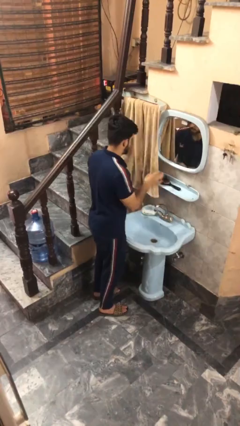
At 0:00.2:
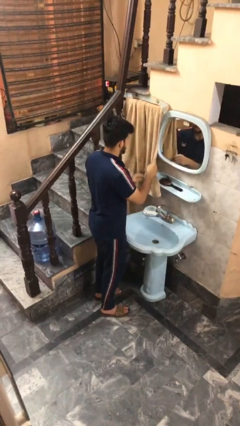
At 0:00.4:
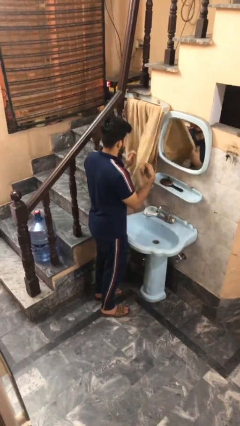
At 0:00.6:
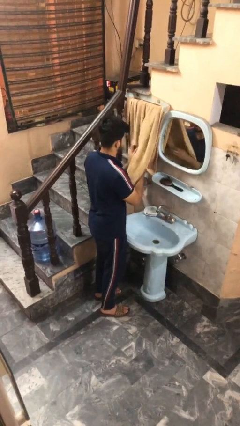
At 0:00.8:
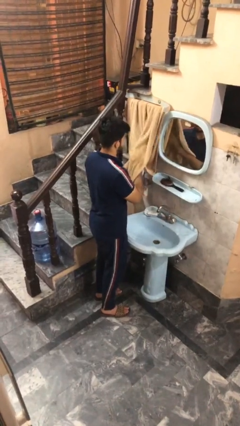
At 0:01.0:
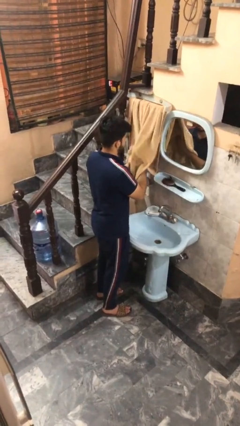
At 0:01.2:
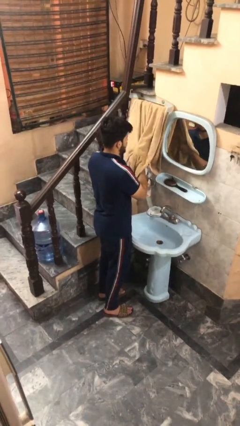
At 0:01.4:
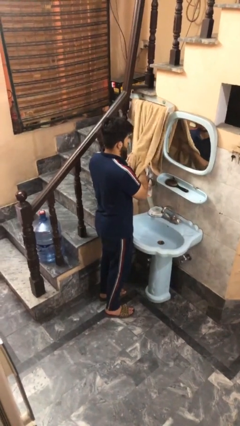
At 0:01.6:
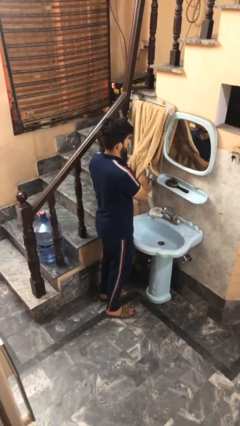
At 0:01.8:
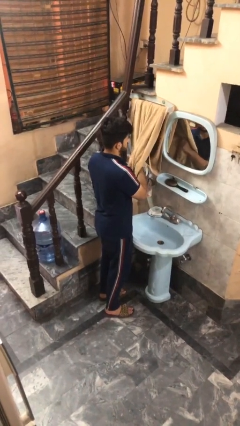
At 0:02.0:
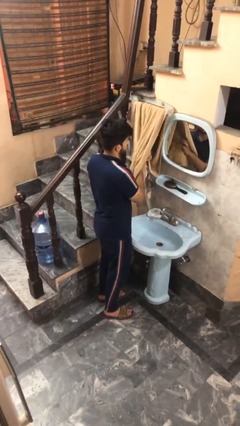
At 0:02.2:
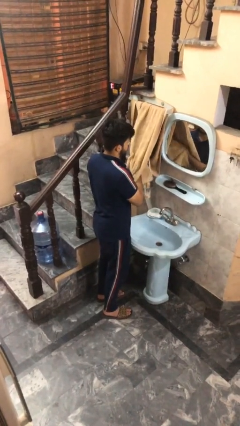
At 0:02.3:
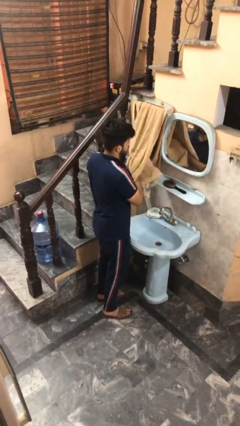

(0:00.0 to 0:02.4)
person dries hands with towel

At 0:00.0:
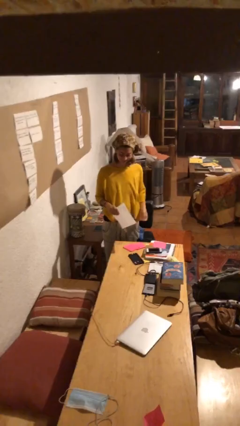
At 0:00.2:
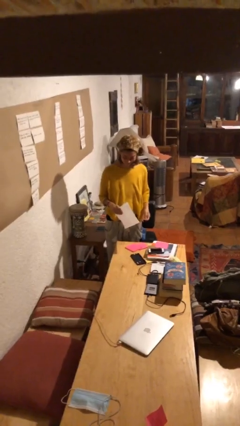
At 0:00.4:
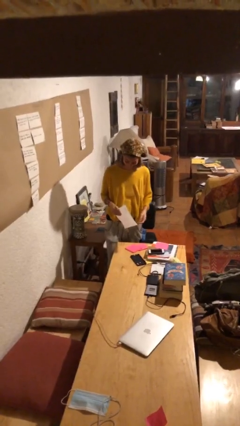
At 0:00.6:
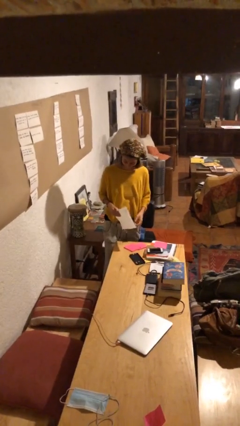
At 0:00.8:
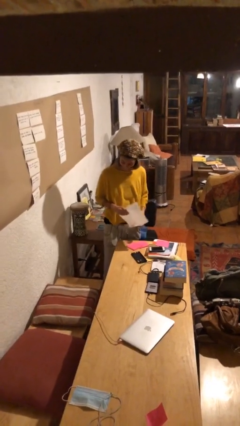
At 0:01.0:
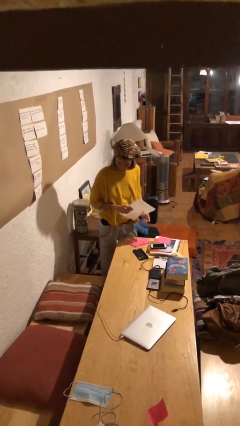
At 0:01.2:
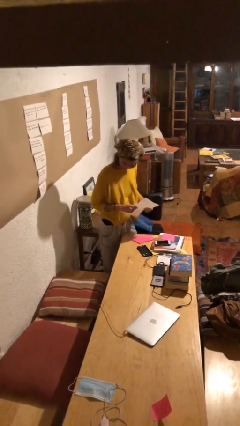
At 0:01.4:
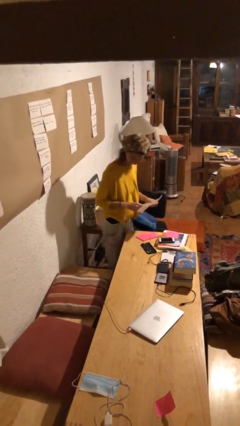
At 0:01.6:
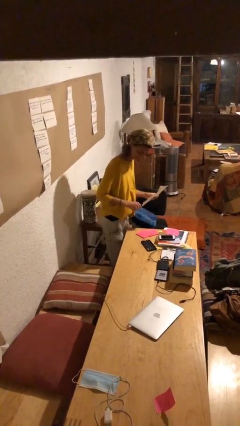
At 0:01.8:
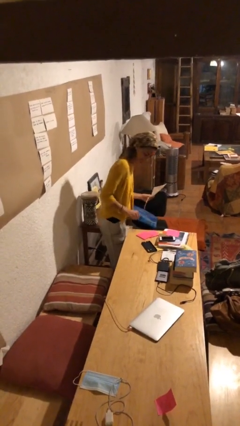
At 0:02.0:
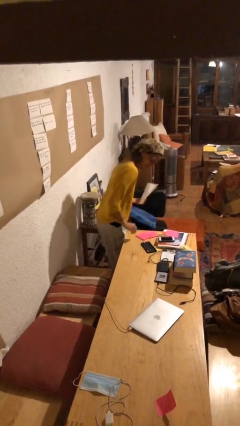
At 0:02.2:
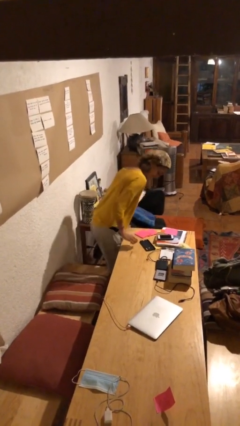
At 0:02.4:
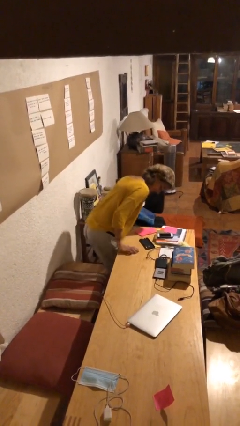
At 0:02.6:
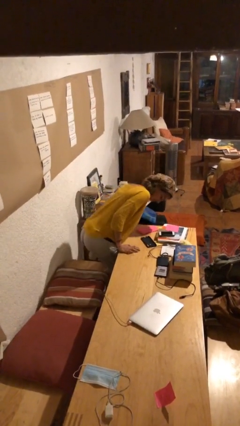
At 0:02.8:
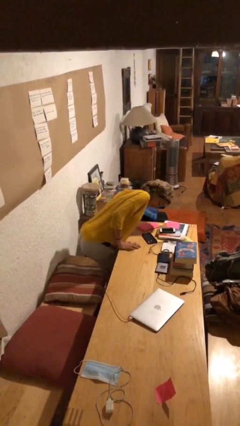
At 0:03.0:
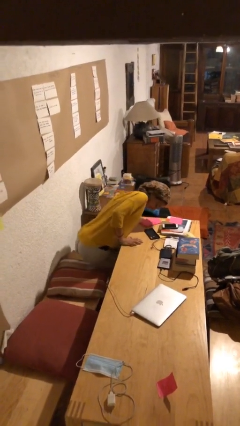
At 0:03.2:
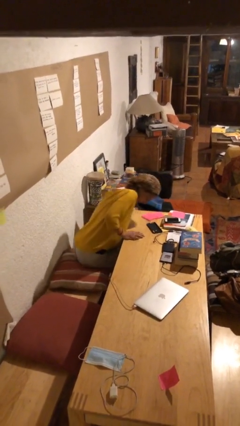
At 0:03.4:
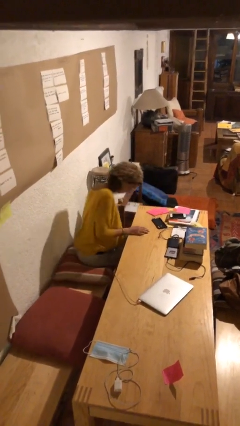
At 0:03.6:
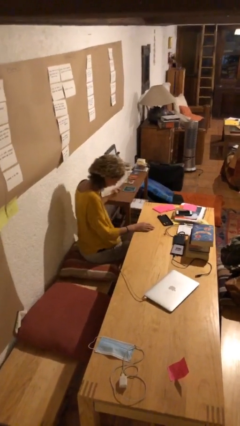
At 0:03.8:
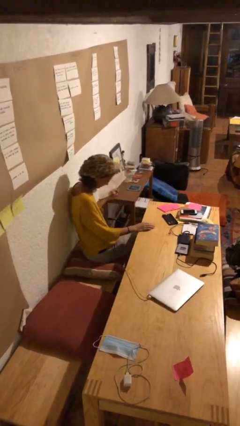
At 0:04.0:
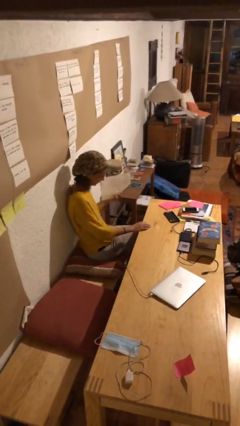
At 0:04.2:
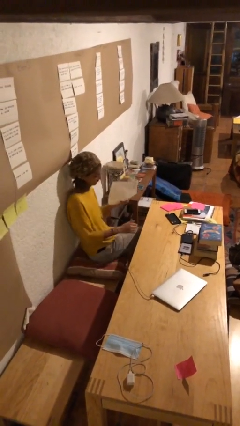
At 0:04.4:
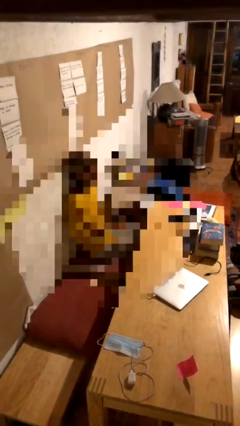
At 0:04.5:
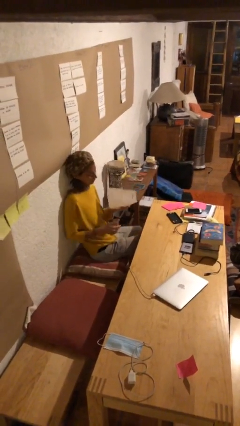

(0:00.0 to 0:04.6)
person sits down

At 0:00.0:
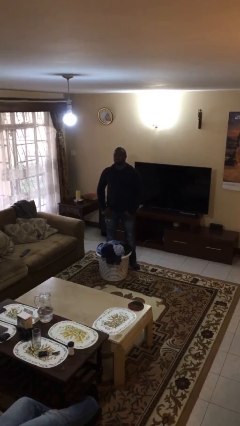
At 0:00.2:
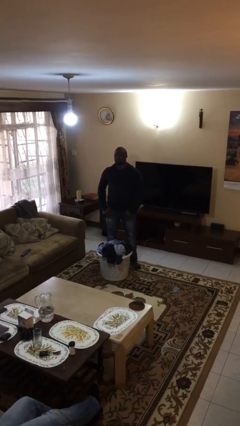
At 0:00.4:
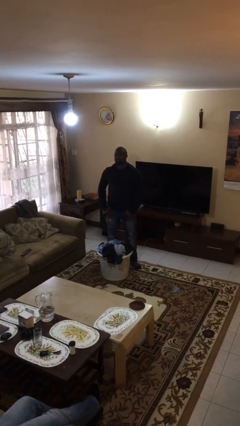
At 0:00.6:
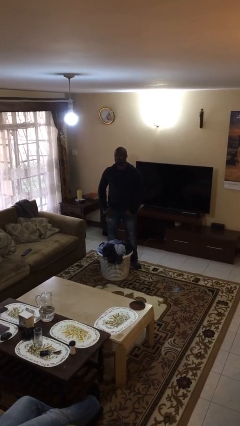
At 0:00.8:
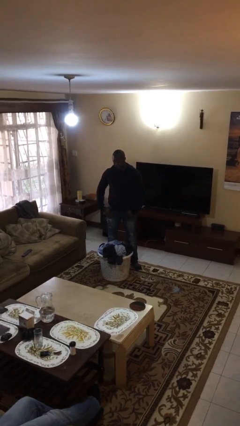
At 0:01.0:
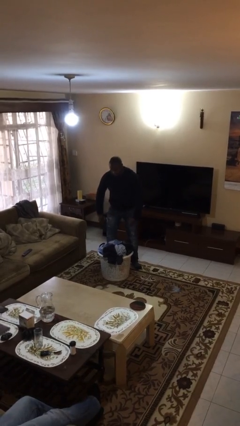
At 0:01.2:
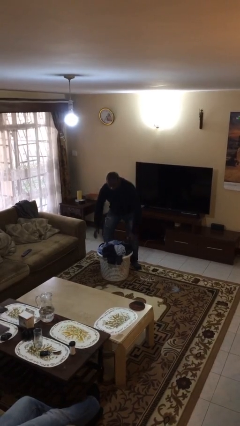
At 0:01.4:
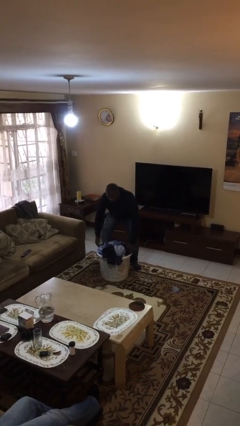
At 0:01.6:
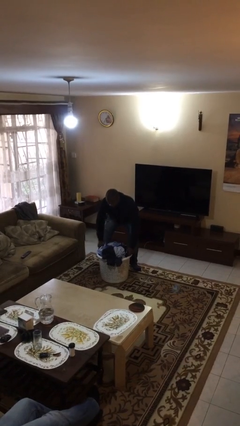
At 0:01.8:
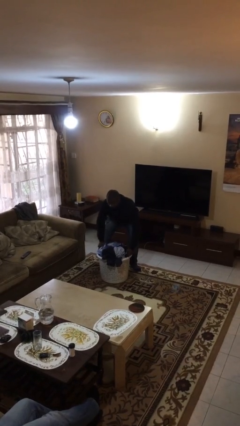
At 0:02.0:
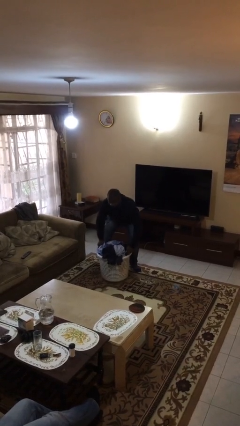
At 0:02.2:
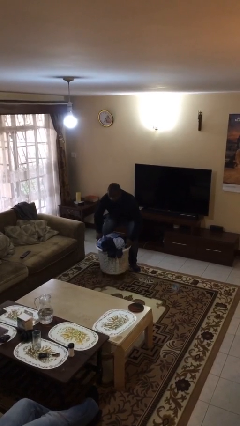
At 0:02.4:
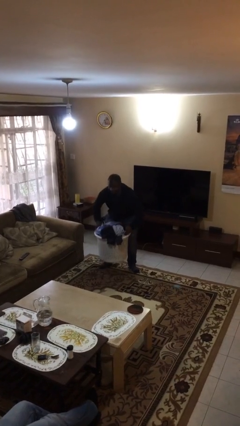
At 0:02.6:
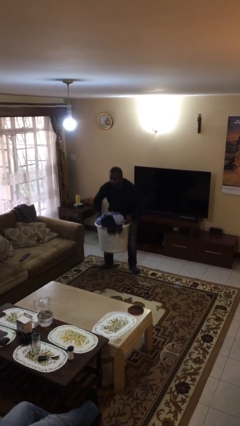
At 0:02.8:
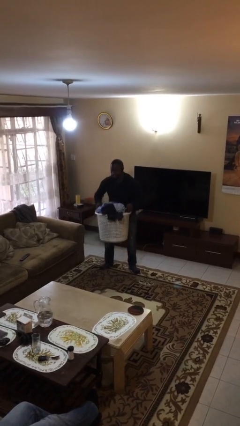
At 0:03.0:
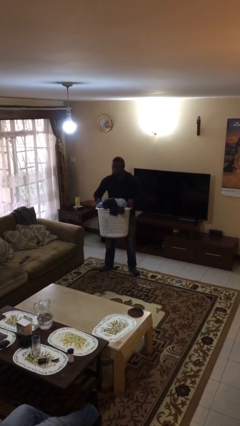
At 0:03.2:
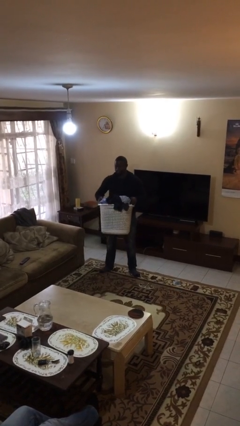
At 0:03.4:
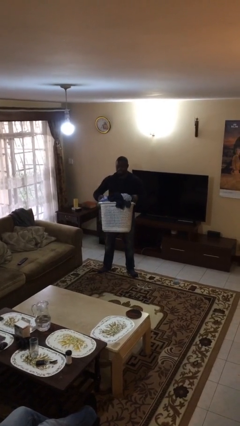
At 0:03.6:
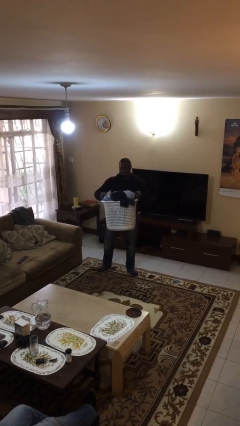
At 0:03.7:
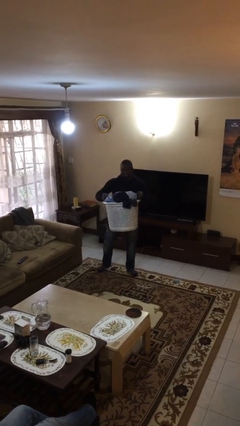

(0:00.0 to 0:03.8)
person picks up object from floor

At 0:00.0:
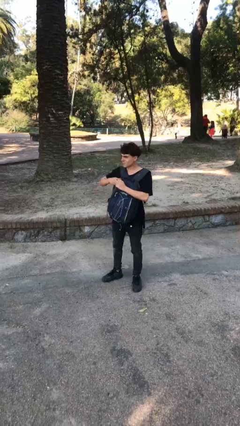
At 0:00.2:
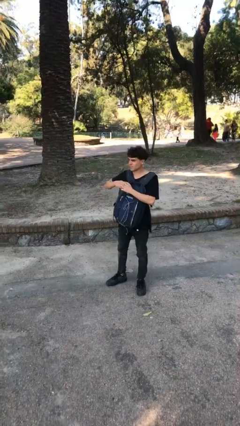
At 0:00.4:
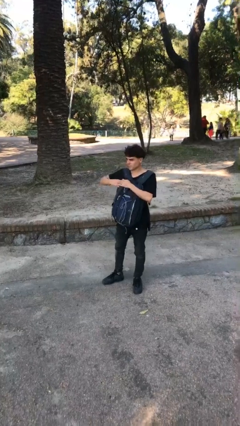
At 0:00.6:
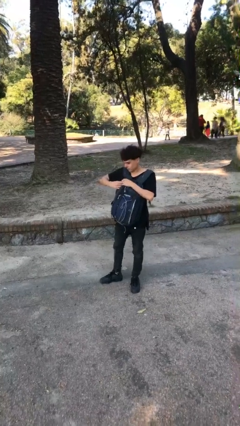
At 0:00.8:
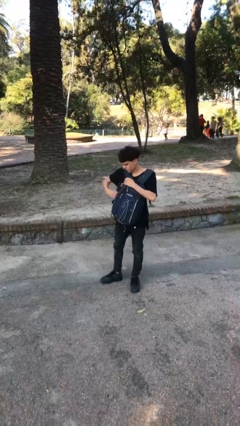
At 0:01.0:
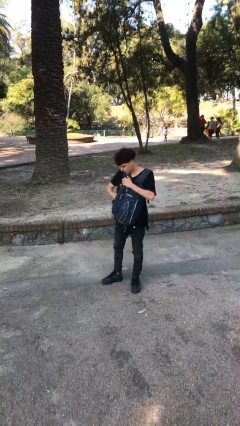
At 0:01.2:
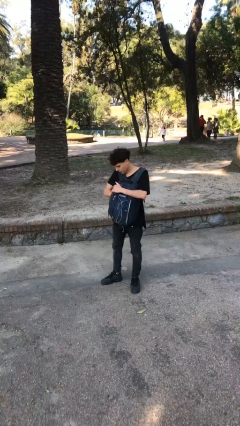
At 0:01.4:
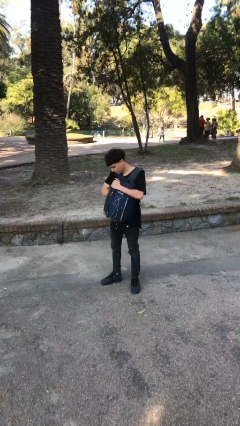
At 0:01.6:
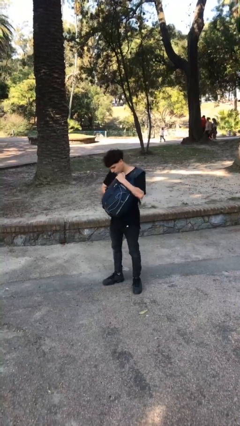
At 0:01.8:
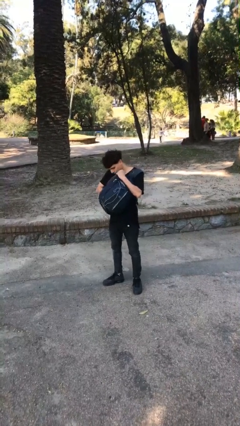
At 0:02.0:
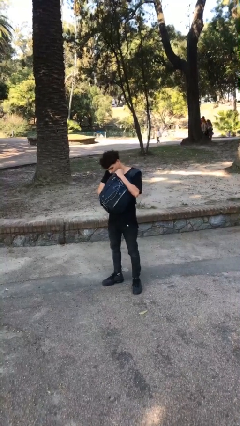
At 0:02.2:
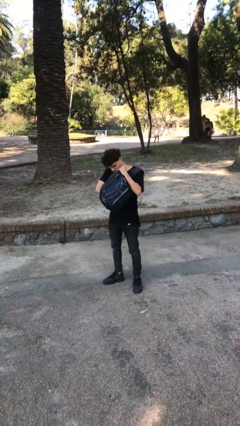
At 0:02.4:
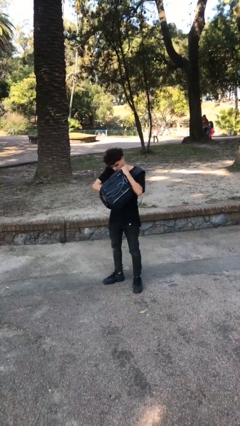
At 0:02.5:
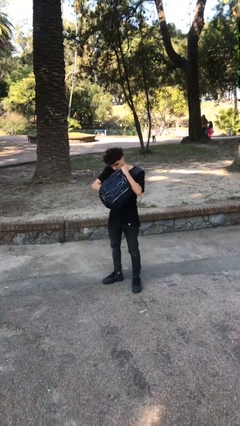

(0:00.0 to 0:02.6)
person searches in backpack

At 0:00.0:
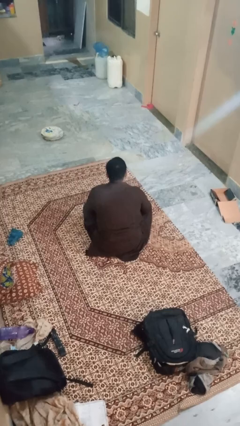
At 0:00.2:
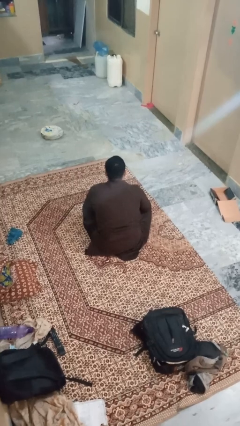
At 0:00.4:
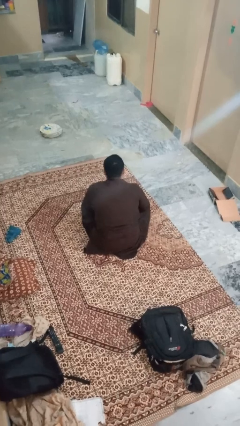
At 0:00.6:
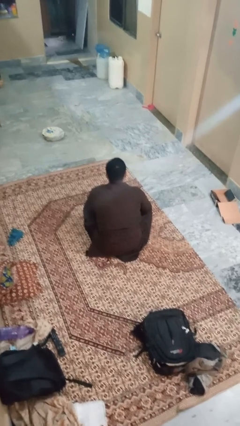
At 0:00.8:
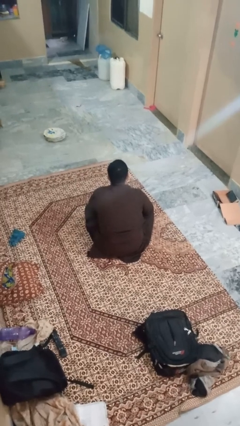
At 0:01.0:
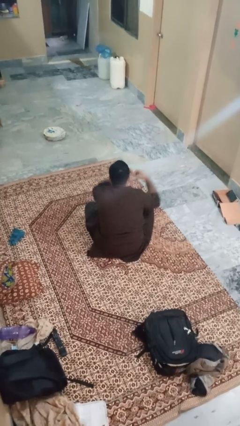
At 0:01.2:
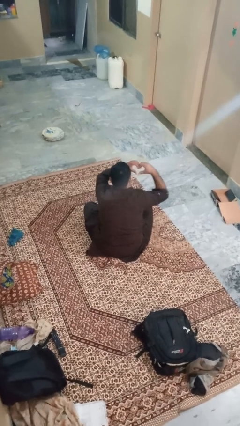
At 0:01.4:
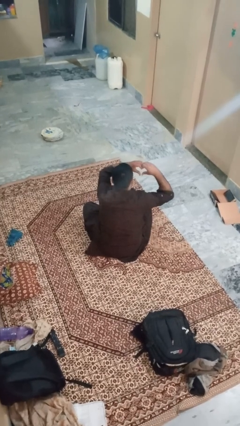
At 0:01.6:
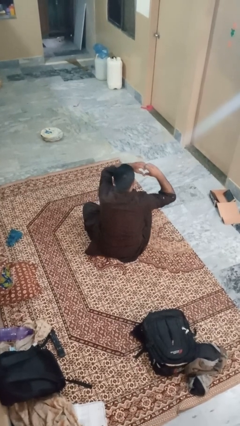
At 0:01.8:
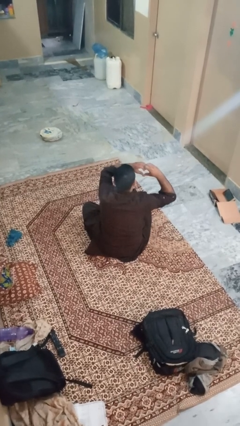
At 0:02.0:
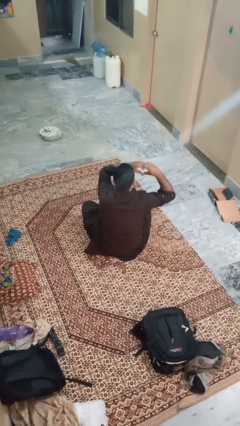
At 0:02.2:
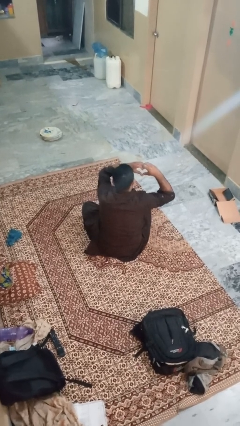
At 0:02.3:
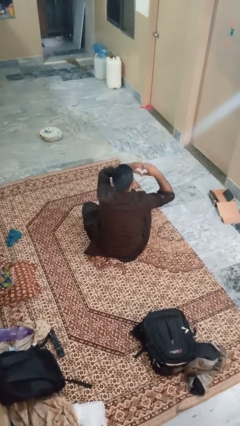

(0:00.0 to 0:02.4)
person gestures heart

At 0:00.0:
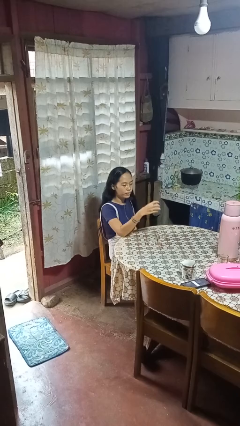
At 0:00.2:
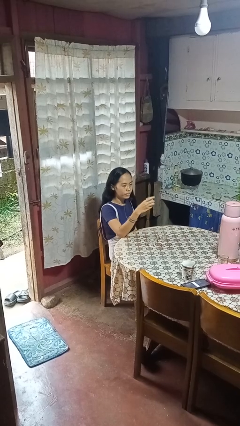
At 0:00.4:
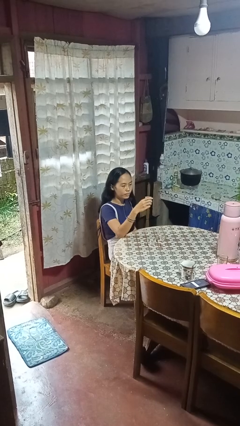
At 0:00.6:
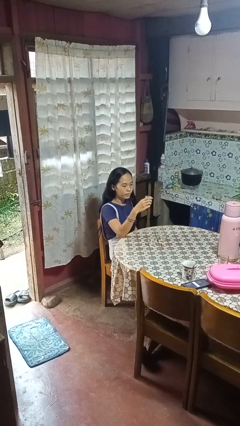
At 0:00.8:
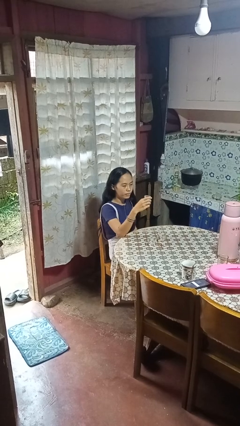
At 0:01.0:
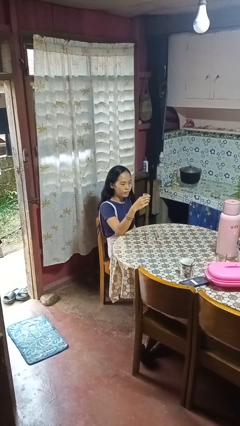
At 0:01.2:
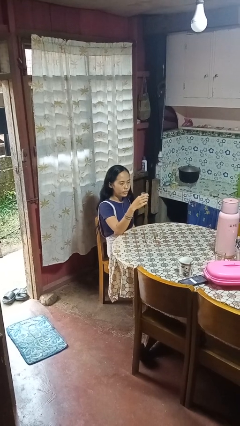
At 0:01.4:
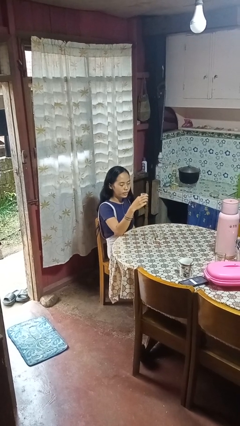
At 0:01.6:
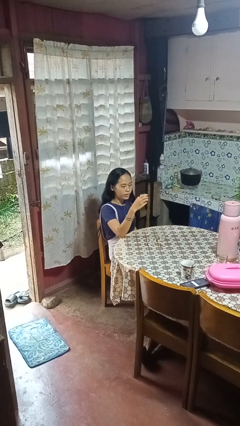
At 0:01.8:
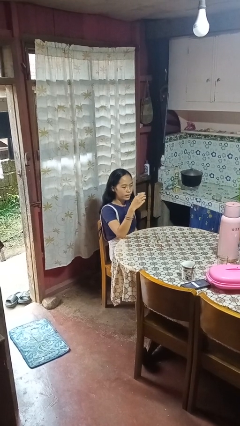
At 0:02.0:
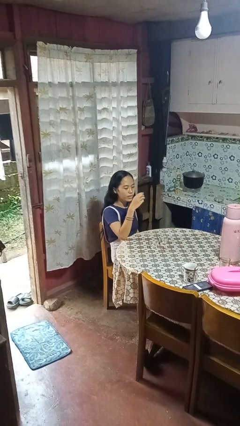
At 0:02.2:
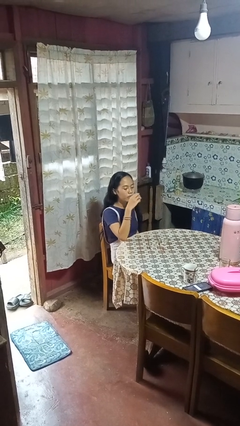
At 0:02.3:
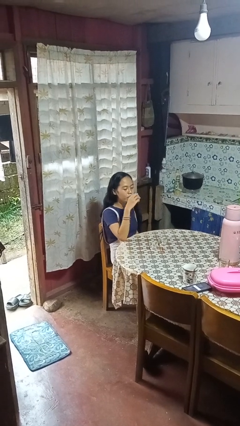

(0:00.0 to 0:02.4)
person picks up object from table
